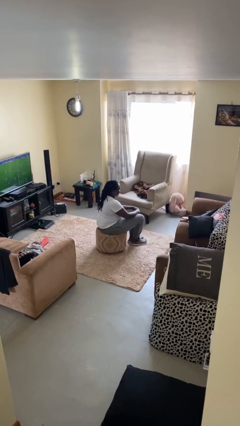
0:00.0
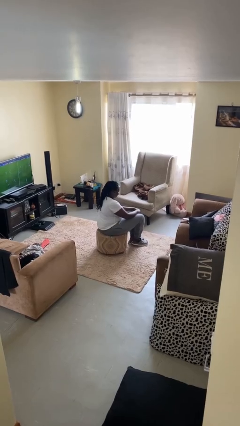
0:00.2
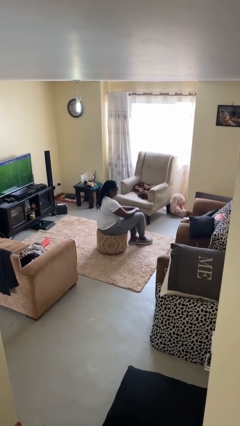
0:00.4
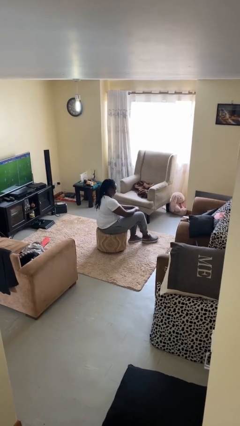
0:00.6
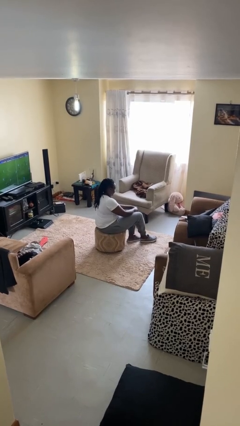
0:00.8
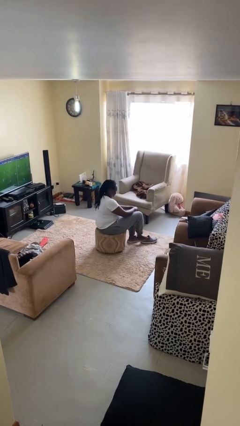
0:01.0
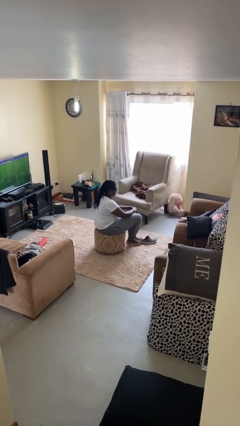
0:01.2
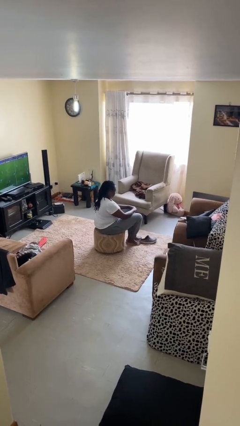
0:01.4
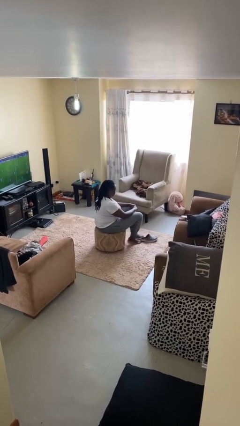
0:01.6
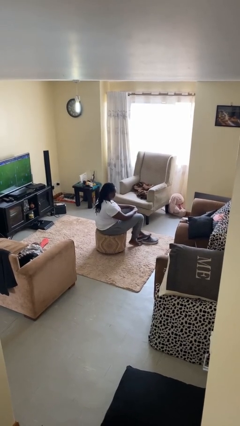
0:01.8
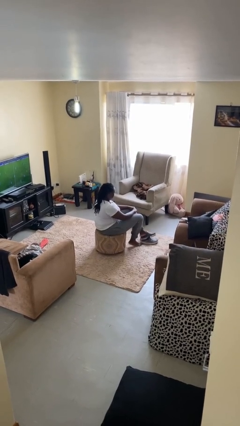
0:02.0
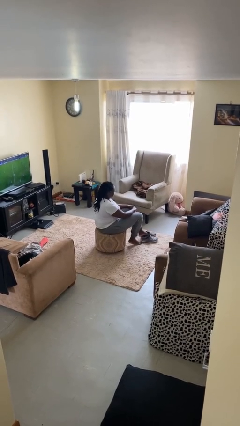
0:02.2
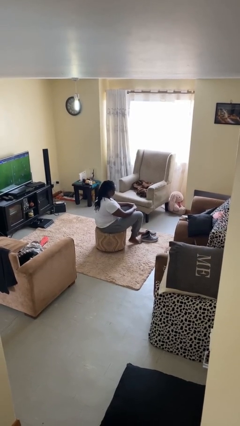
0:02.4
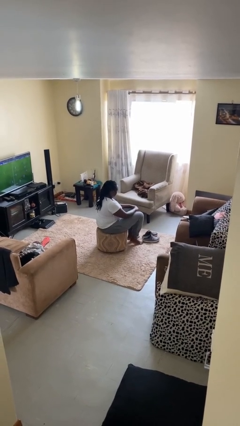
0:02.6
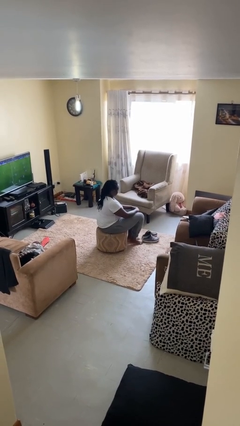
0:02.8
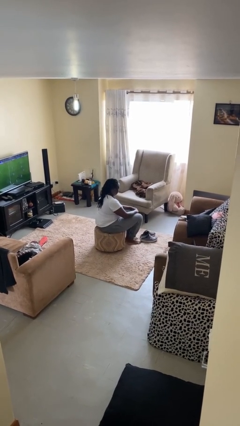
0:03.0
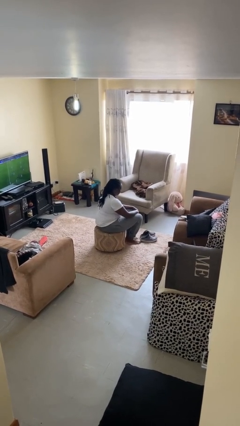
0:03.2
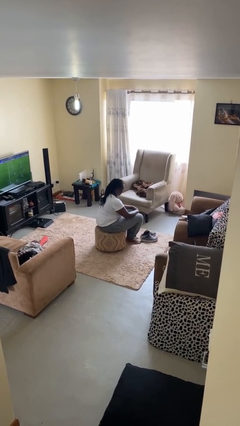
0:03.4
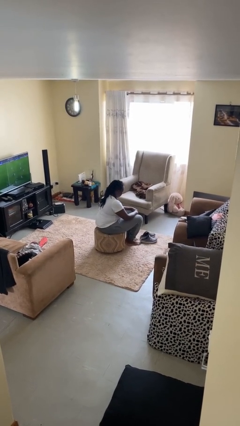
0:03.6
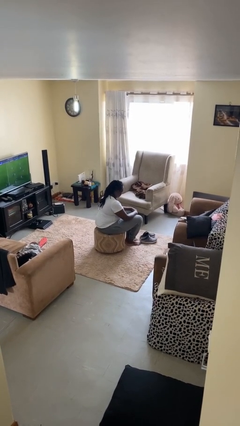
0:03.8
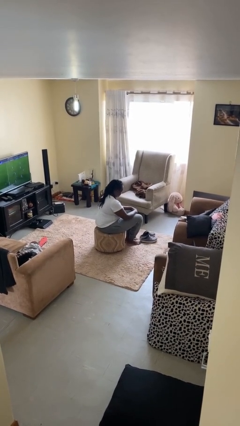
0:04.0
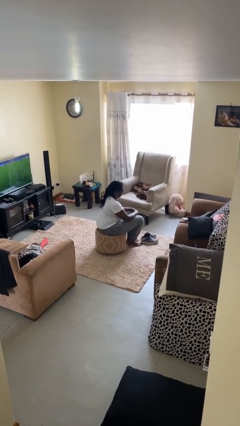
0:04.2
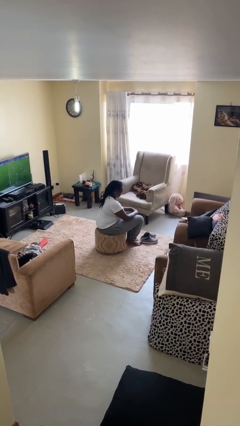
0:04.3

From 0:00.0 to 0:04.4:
person takes off shoes

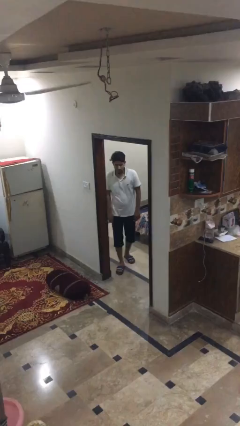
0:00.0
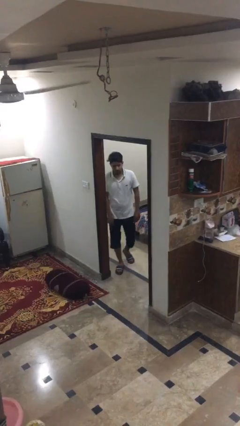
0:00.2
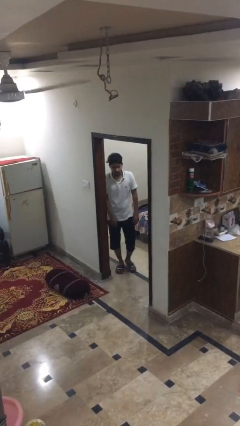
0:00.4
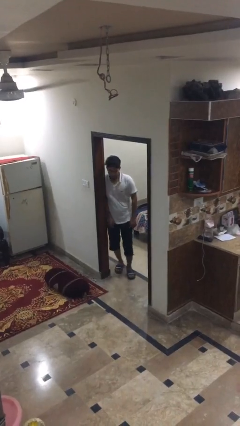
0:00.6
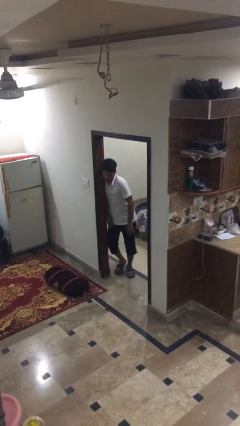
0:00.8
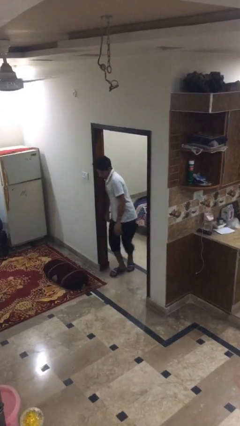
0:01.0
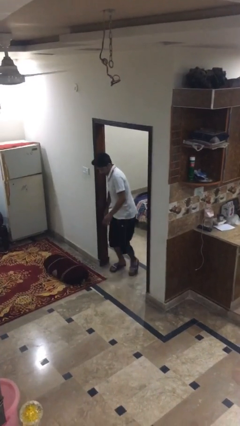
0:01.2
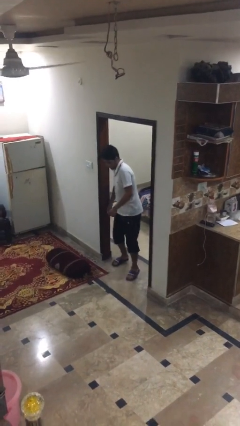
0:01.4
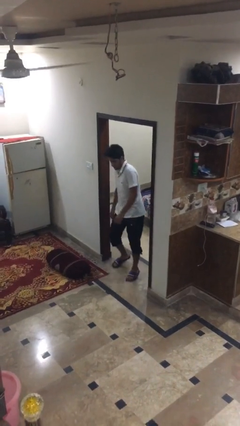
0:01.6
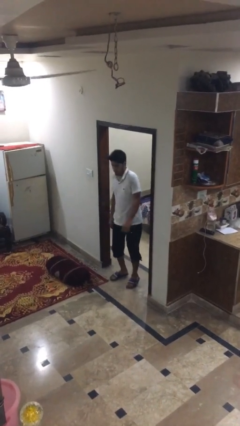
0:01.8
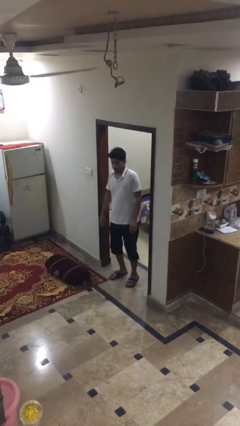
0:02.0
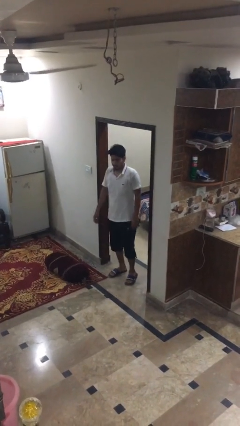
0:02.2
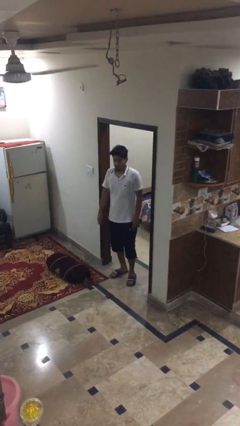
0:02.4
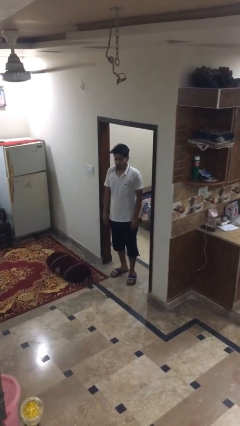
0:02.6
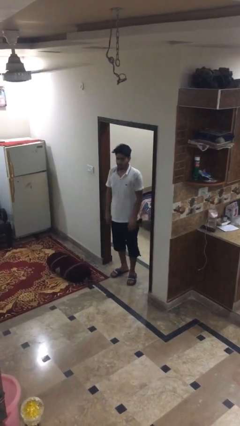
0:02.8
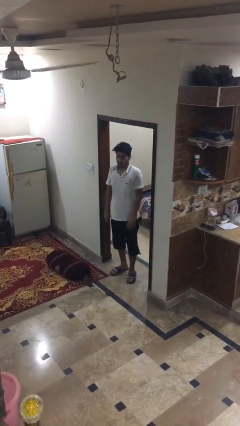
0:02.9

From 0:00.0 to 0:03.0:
person bumps into wall

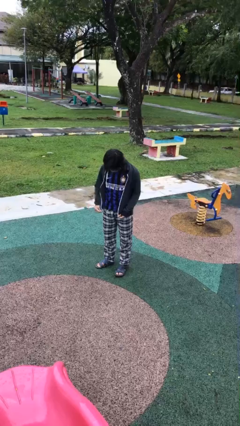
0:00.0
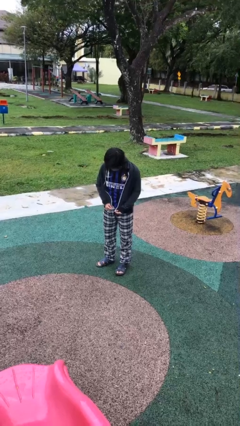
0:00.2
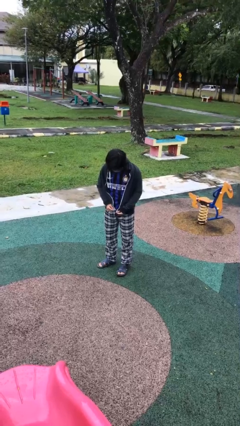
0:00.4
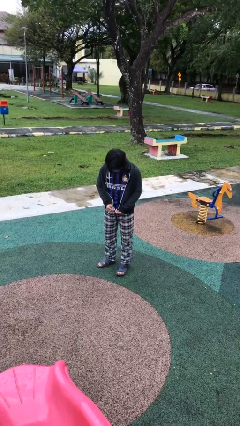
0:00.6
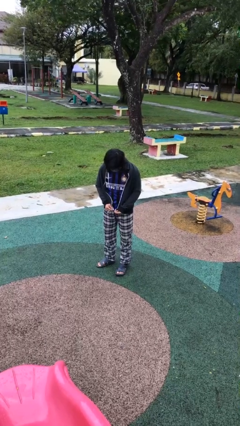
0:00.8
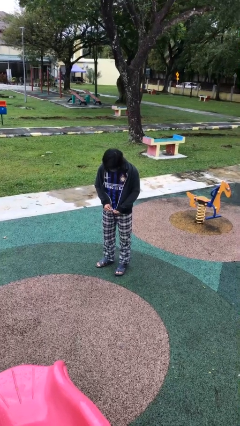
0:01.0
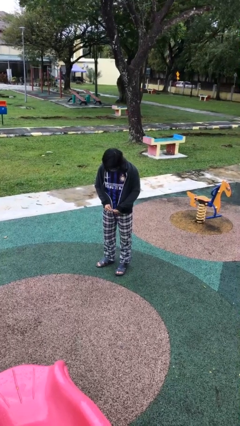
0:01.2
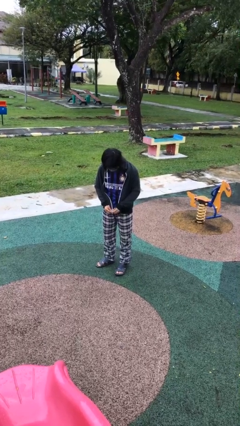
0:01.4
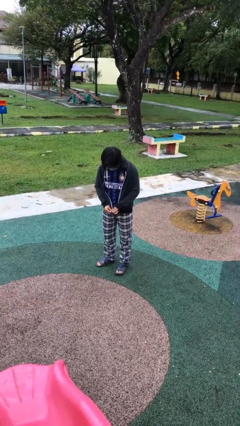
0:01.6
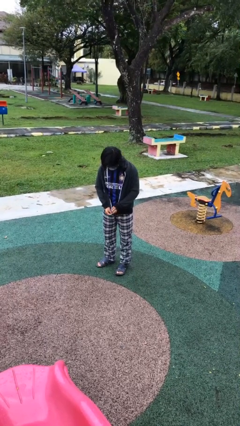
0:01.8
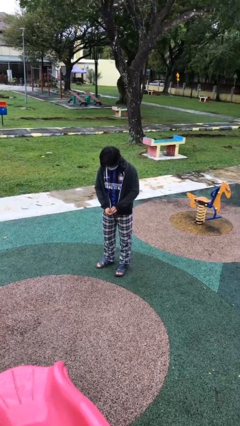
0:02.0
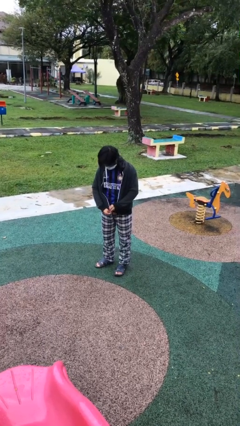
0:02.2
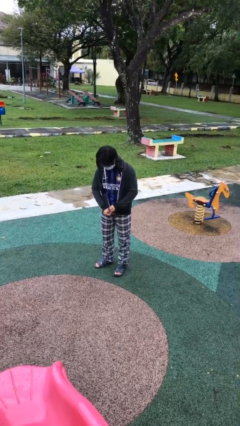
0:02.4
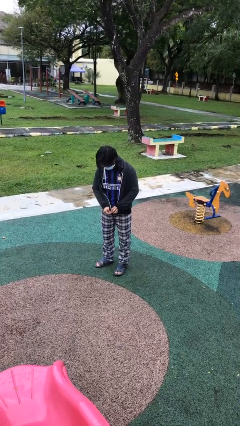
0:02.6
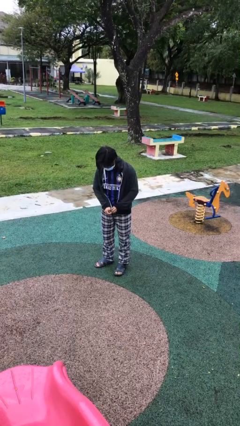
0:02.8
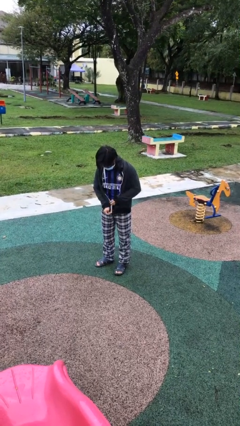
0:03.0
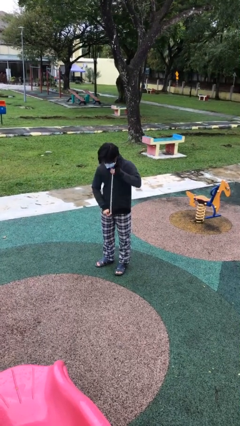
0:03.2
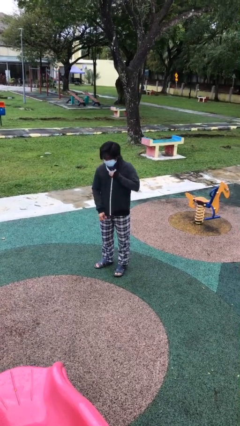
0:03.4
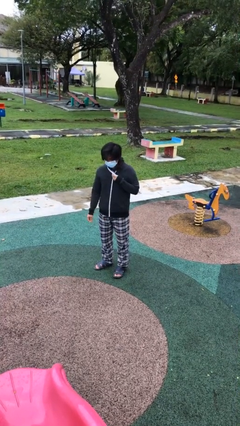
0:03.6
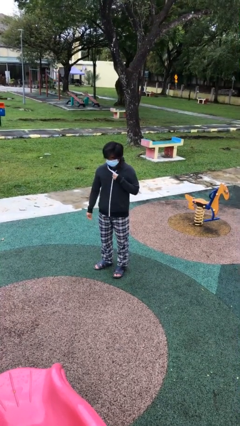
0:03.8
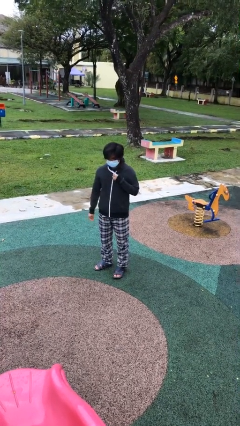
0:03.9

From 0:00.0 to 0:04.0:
person zips up jacket

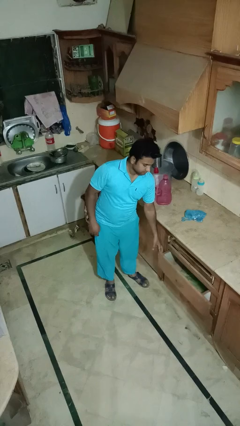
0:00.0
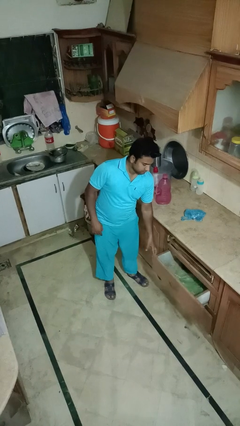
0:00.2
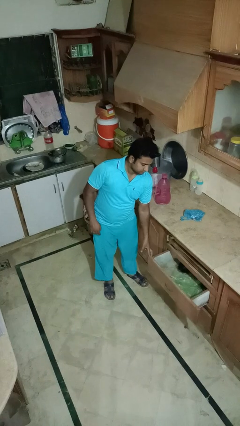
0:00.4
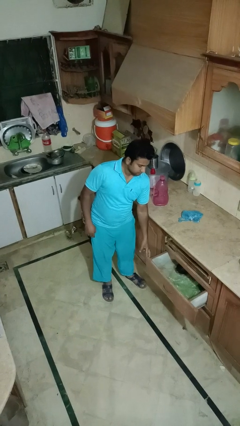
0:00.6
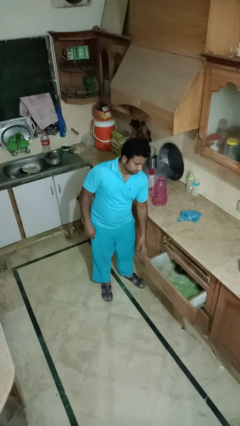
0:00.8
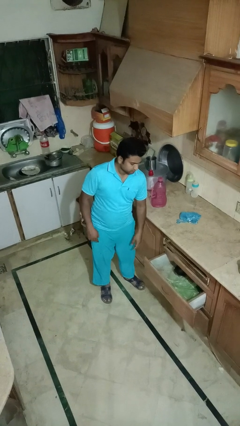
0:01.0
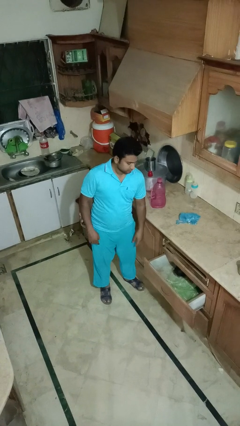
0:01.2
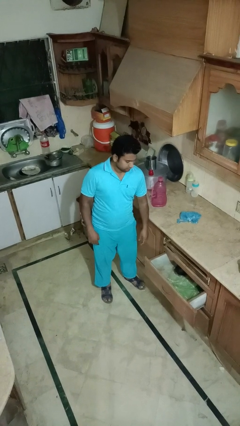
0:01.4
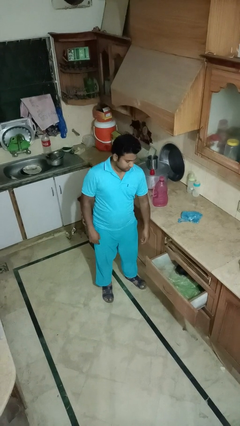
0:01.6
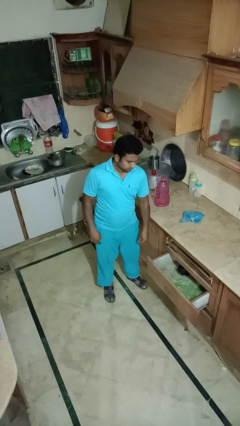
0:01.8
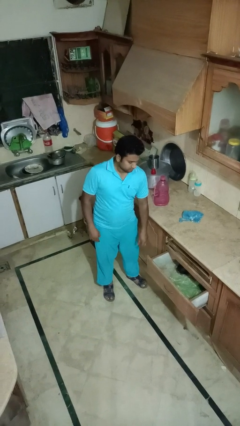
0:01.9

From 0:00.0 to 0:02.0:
person opens kitchen drawer

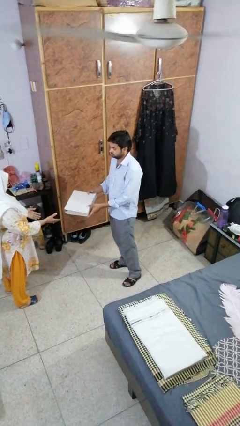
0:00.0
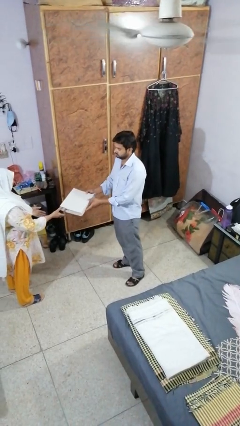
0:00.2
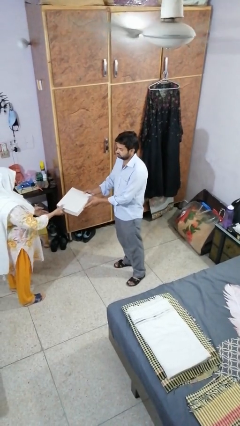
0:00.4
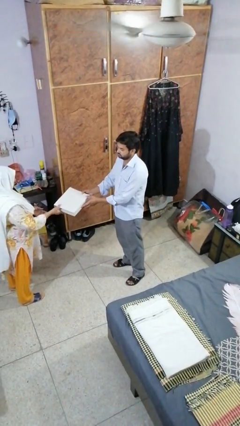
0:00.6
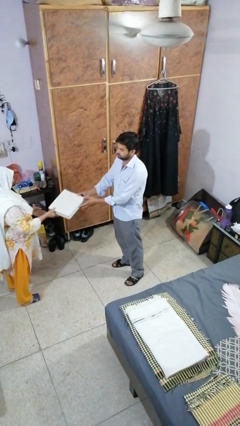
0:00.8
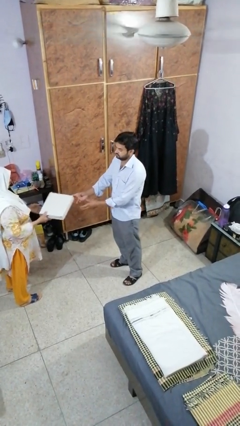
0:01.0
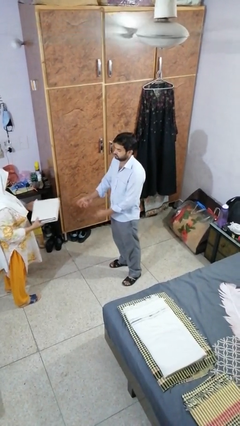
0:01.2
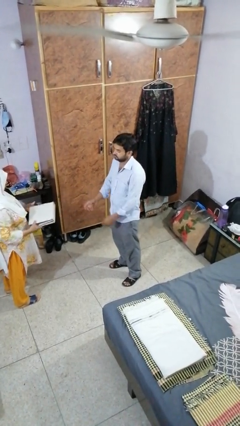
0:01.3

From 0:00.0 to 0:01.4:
person transfers object to person

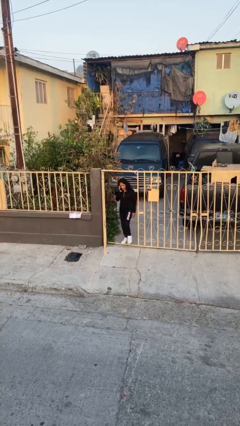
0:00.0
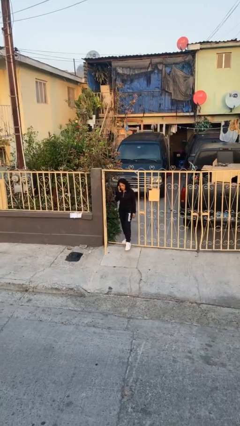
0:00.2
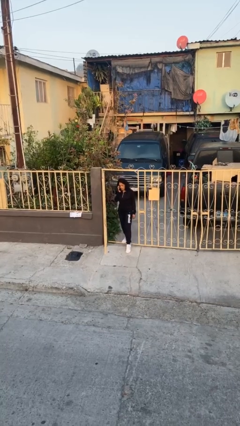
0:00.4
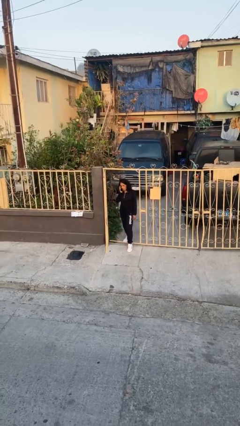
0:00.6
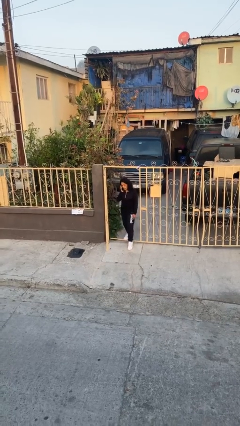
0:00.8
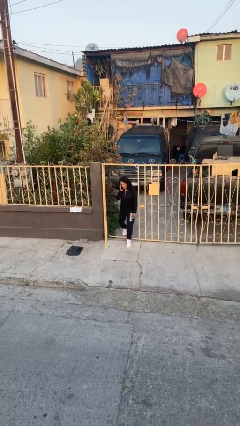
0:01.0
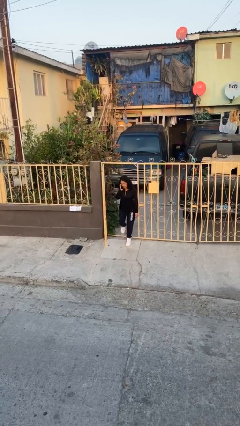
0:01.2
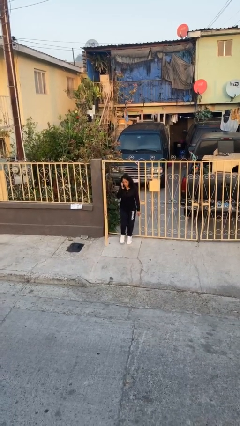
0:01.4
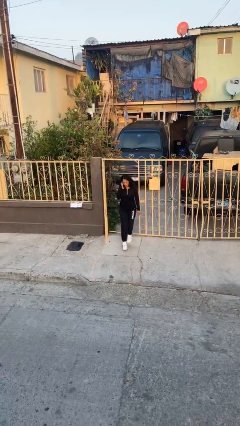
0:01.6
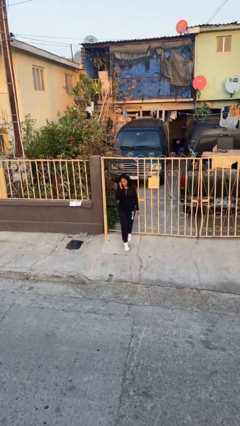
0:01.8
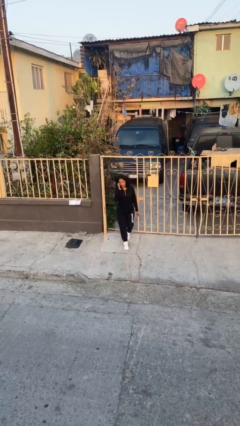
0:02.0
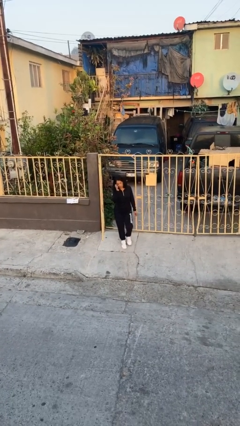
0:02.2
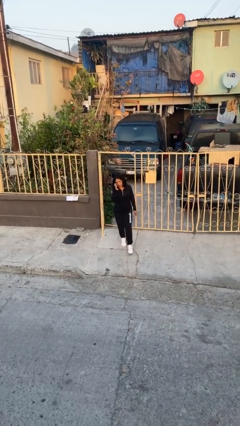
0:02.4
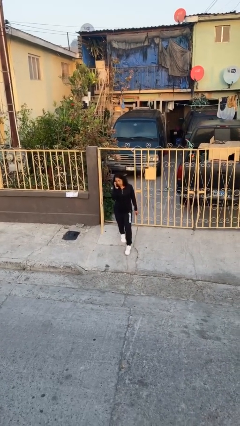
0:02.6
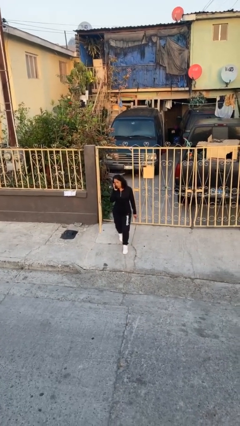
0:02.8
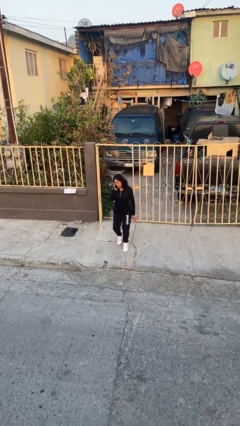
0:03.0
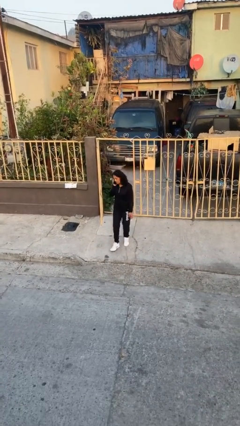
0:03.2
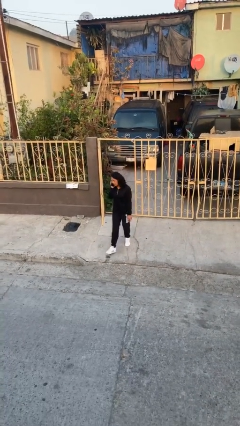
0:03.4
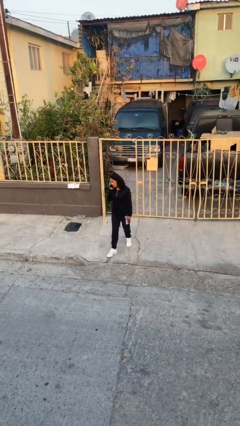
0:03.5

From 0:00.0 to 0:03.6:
person enters scene through structure
